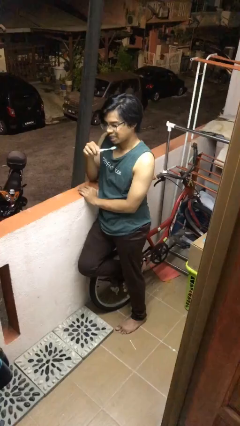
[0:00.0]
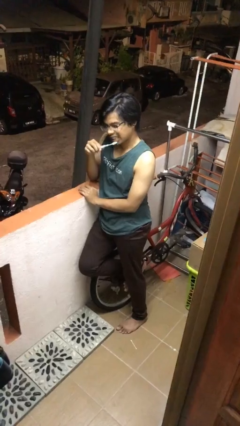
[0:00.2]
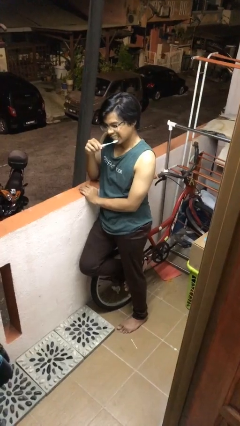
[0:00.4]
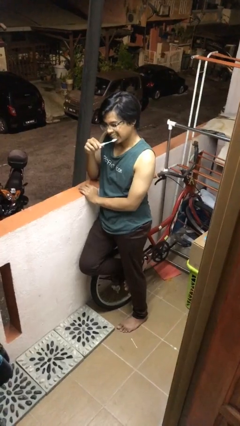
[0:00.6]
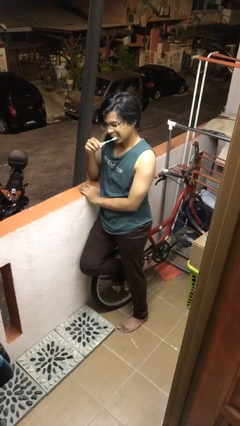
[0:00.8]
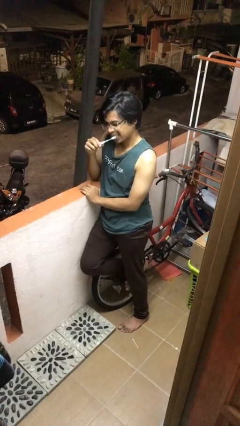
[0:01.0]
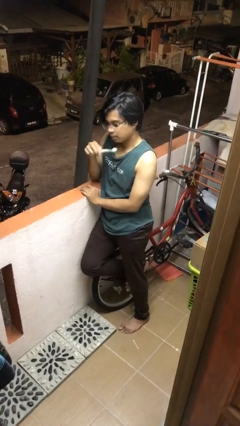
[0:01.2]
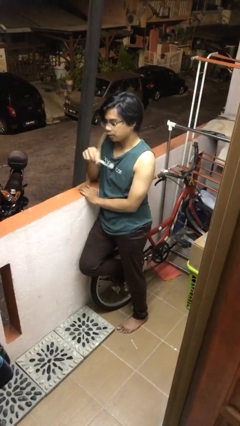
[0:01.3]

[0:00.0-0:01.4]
person brushes teeth

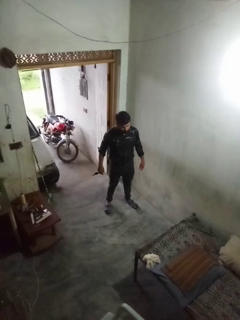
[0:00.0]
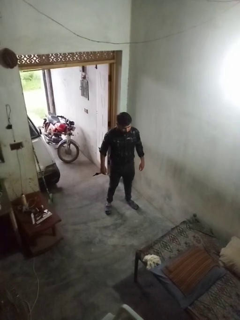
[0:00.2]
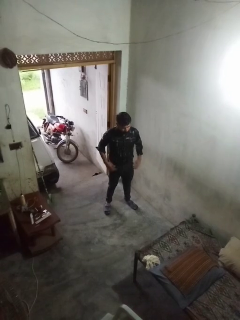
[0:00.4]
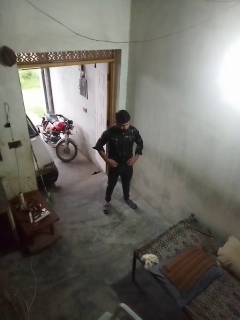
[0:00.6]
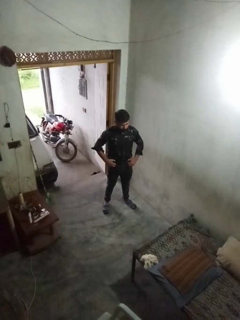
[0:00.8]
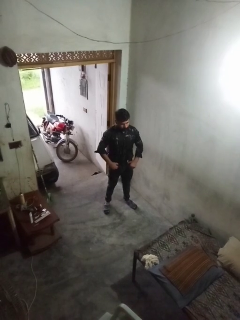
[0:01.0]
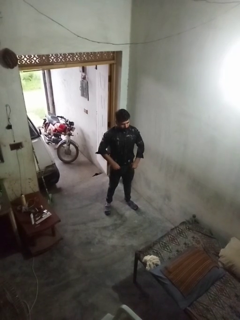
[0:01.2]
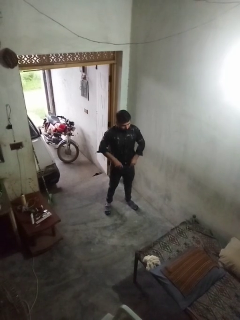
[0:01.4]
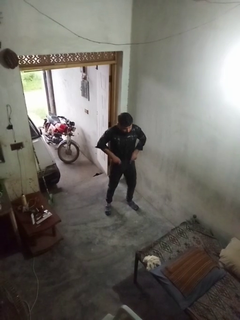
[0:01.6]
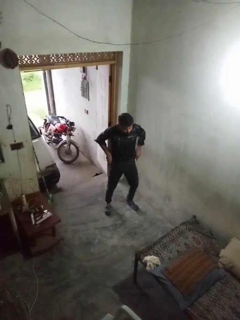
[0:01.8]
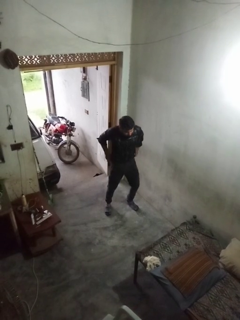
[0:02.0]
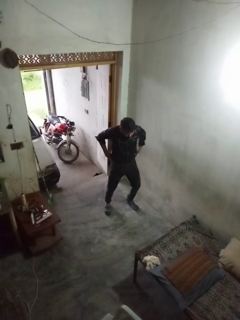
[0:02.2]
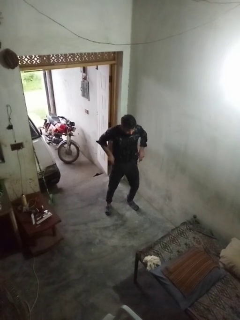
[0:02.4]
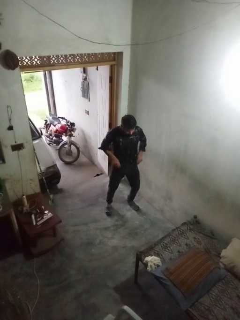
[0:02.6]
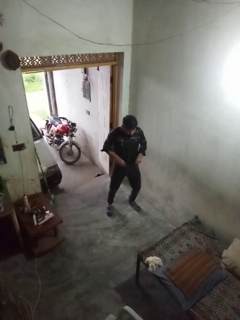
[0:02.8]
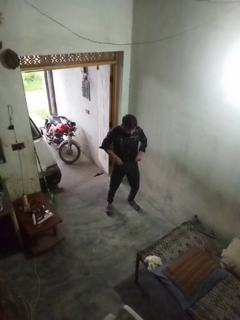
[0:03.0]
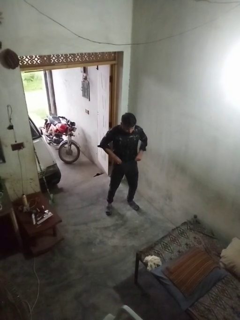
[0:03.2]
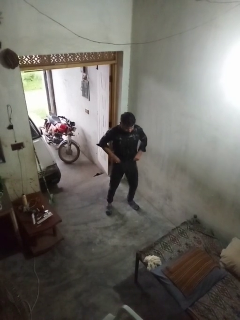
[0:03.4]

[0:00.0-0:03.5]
person hikes up pants

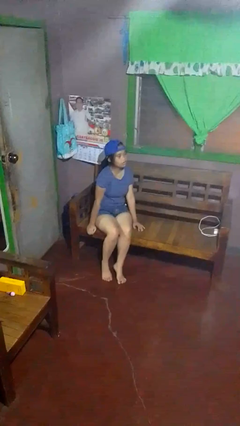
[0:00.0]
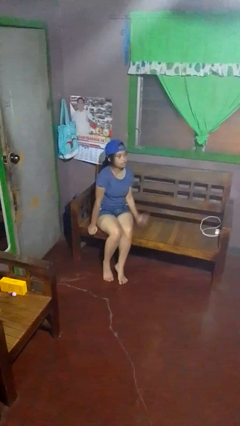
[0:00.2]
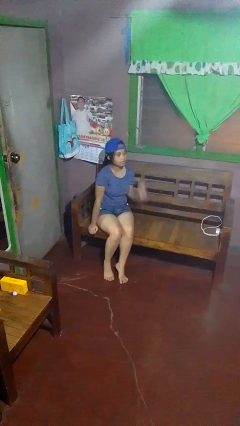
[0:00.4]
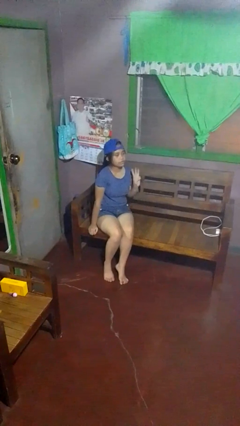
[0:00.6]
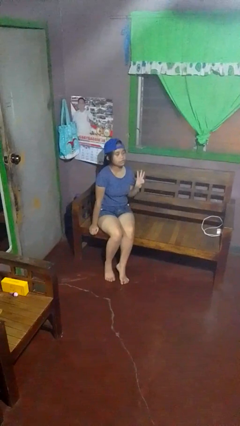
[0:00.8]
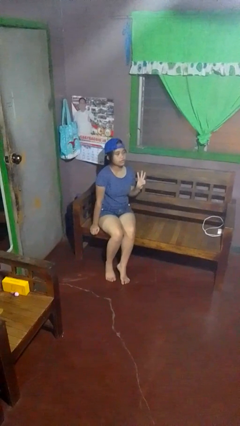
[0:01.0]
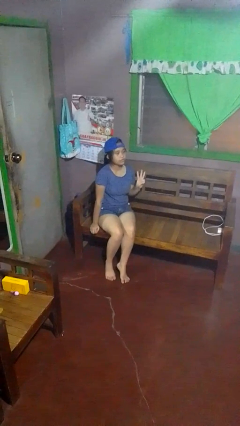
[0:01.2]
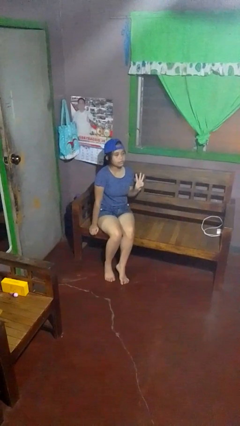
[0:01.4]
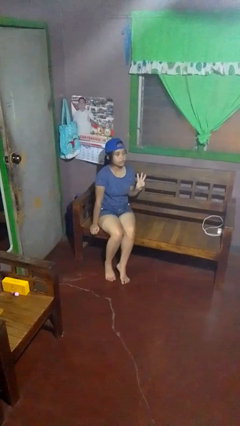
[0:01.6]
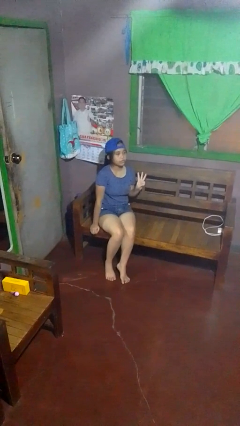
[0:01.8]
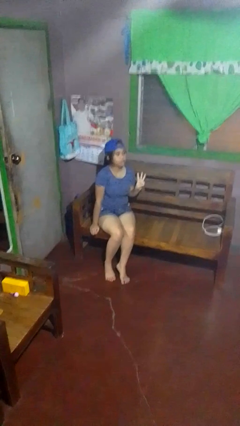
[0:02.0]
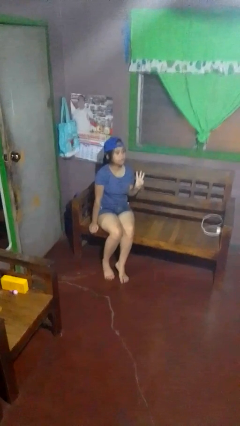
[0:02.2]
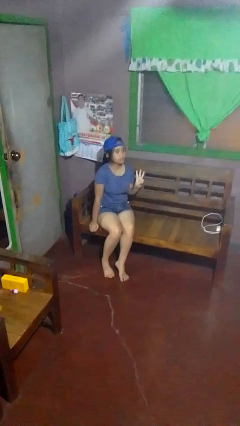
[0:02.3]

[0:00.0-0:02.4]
person gestures number three

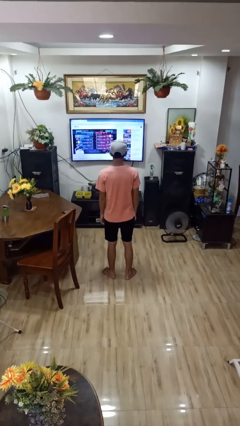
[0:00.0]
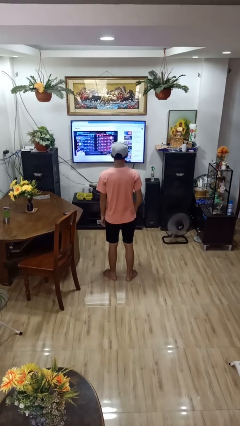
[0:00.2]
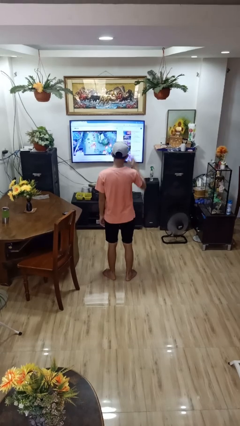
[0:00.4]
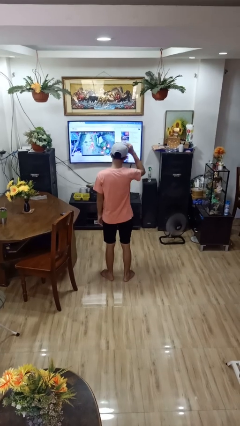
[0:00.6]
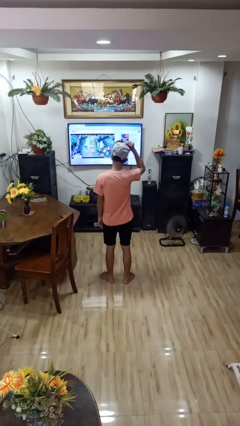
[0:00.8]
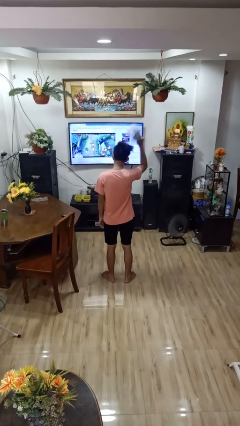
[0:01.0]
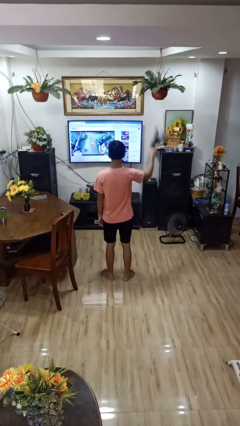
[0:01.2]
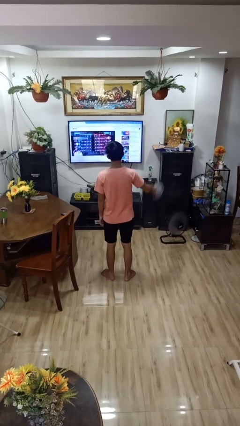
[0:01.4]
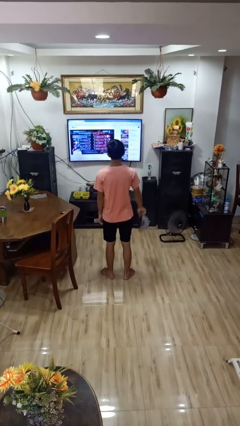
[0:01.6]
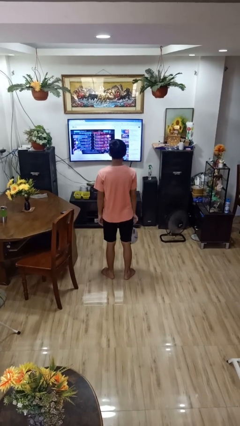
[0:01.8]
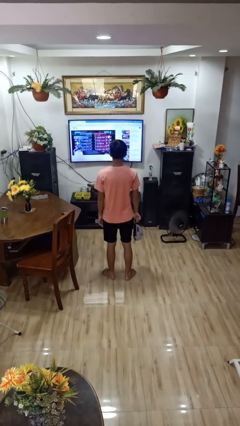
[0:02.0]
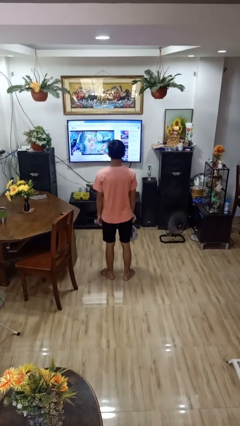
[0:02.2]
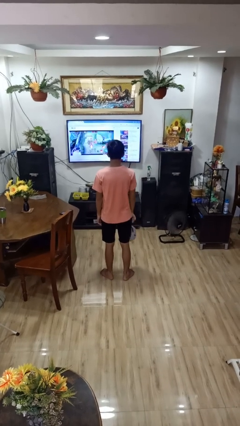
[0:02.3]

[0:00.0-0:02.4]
person takes off hat

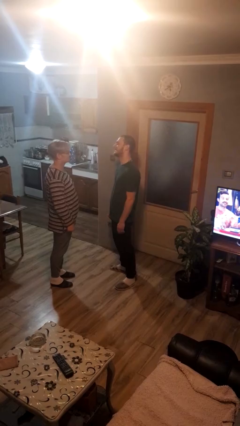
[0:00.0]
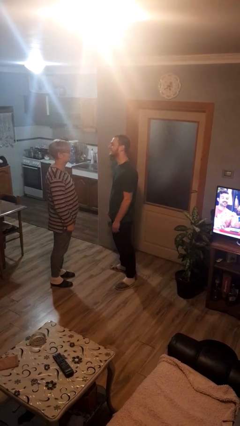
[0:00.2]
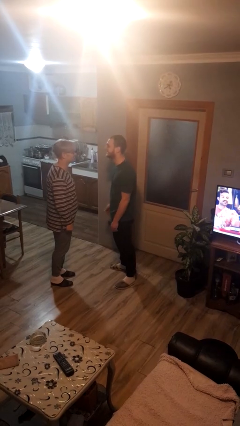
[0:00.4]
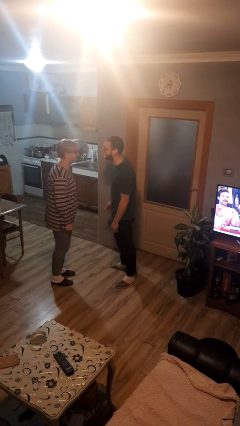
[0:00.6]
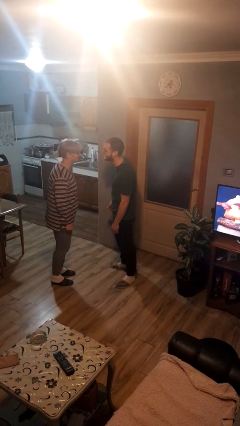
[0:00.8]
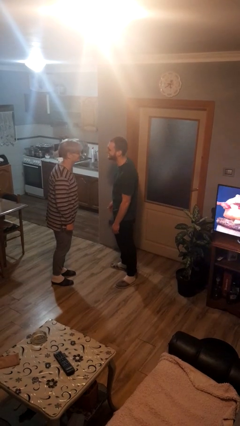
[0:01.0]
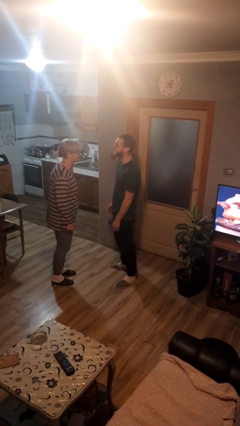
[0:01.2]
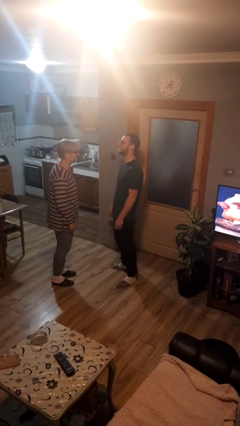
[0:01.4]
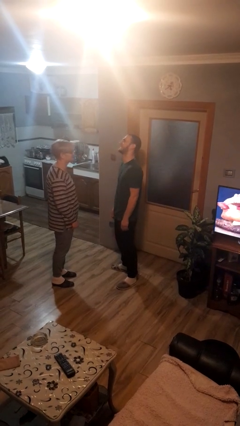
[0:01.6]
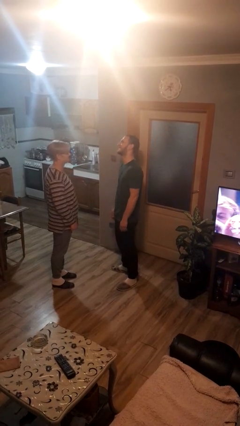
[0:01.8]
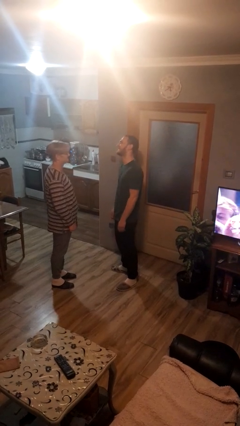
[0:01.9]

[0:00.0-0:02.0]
person laughs with person

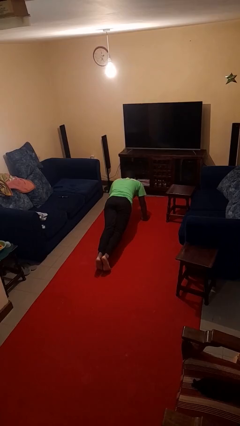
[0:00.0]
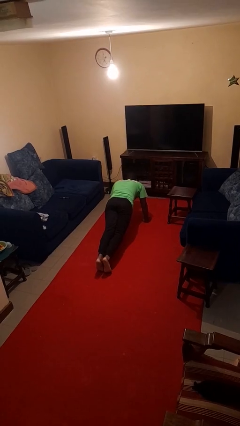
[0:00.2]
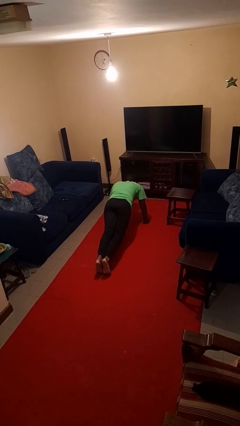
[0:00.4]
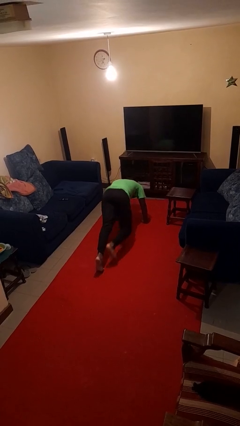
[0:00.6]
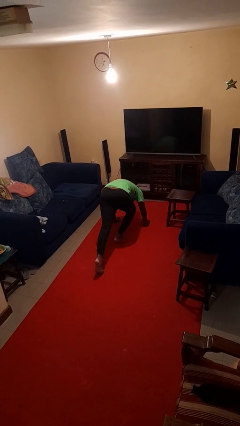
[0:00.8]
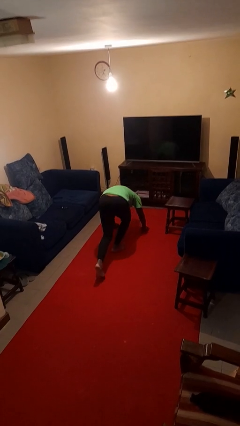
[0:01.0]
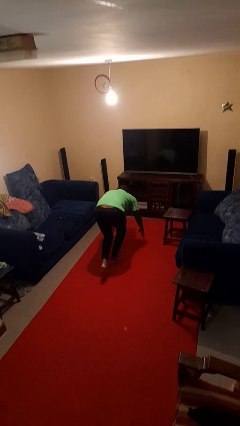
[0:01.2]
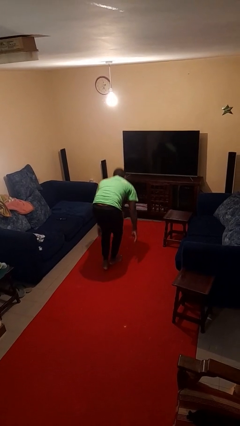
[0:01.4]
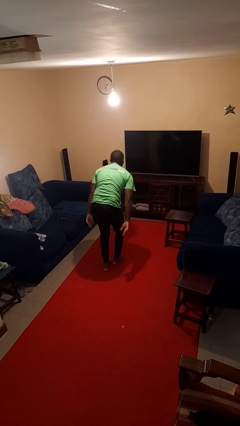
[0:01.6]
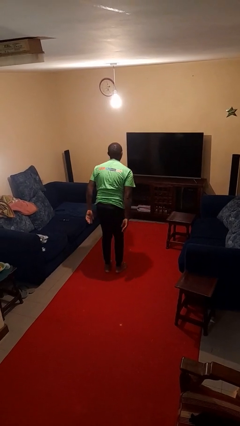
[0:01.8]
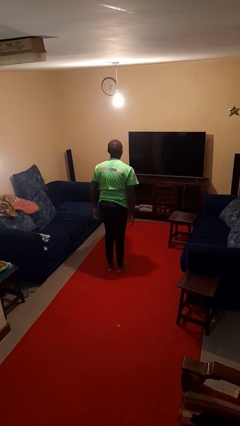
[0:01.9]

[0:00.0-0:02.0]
person stands up from floor

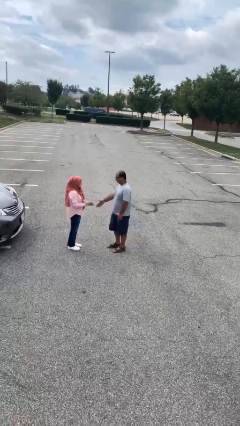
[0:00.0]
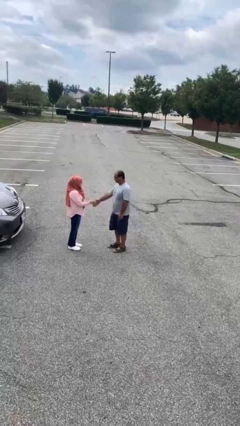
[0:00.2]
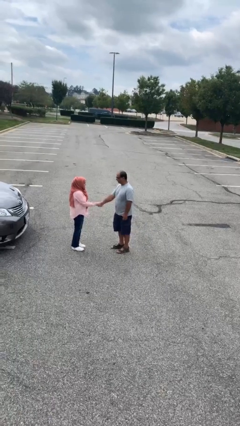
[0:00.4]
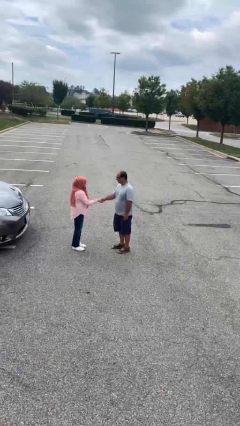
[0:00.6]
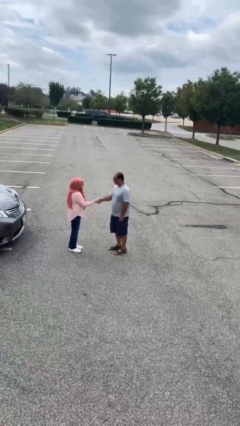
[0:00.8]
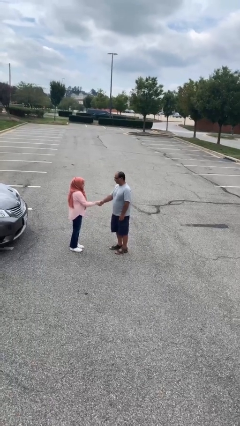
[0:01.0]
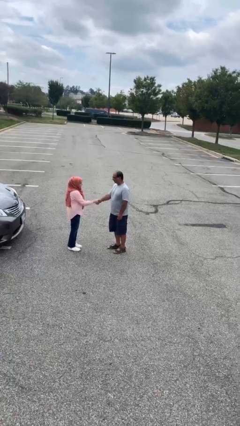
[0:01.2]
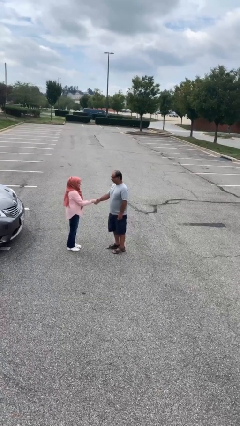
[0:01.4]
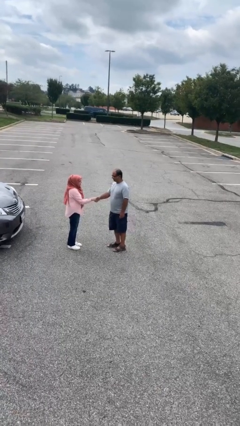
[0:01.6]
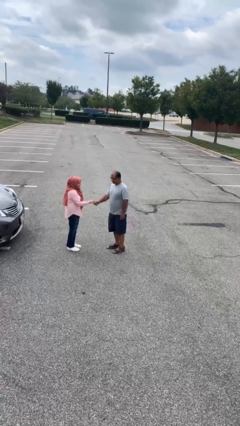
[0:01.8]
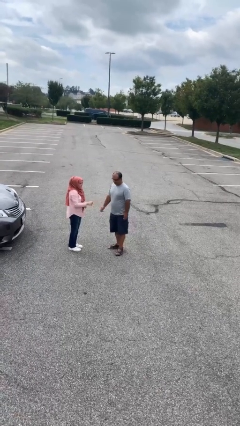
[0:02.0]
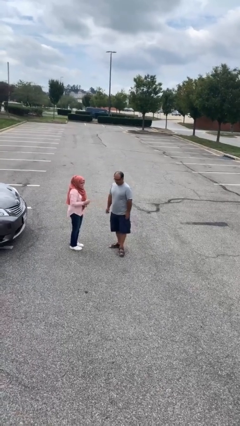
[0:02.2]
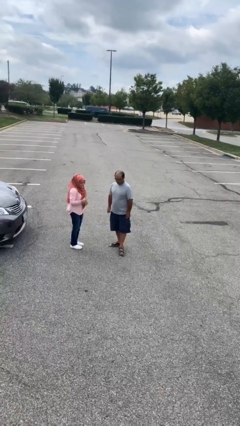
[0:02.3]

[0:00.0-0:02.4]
person shakes hand

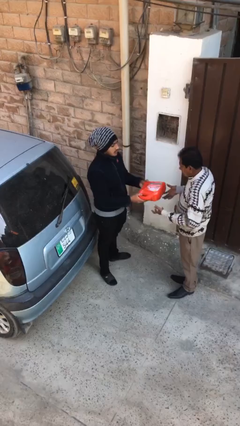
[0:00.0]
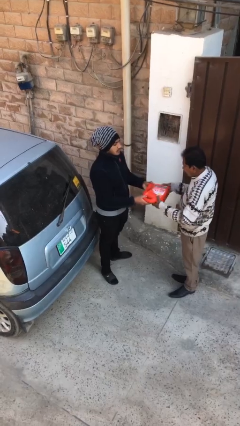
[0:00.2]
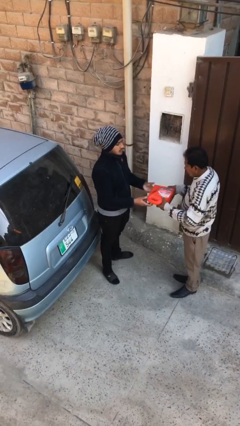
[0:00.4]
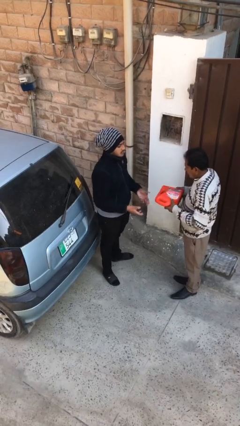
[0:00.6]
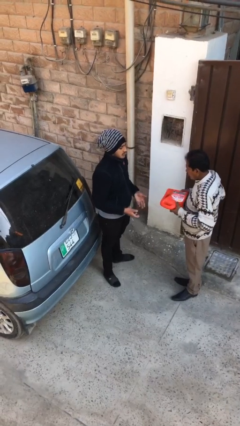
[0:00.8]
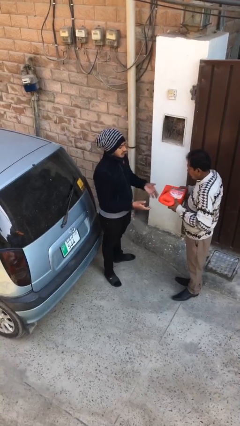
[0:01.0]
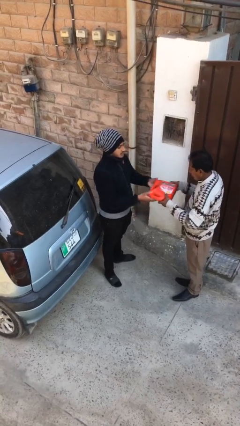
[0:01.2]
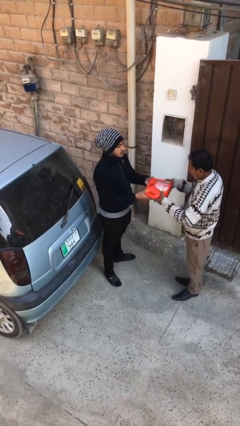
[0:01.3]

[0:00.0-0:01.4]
person transfers object to person

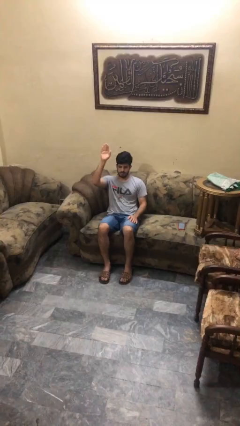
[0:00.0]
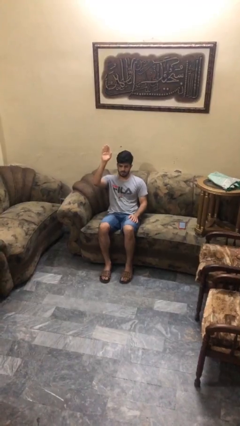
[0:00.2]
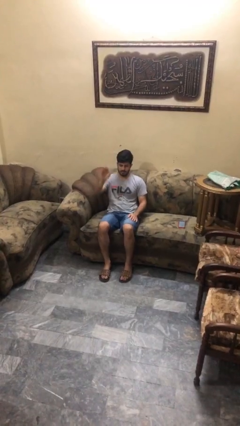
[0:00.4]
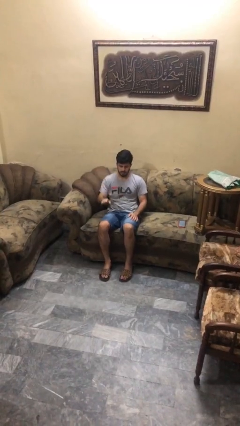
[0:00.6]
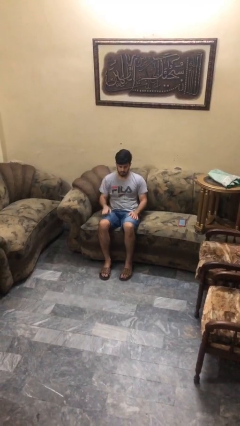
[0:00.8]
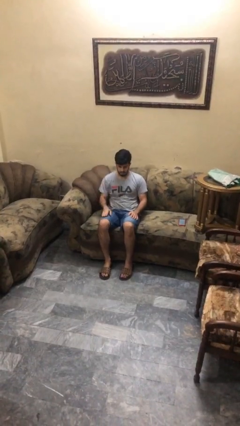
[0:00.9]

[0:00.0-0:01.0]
person gestures lower hand
